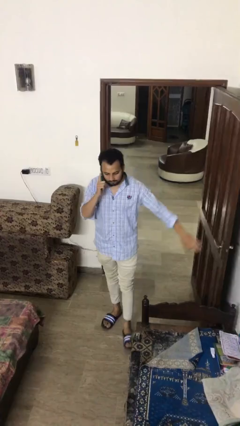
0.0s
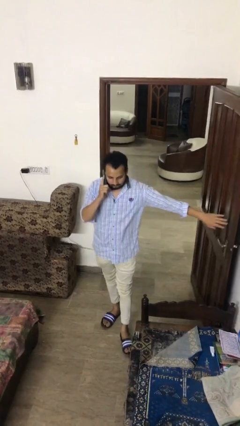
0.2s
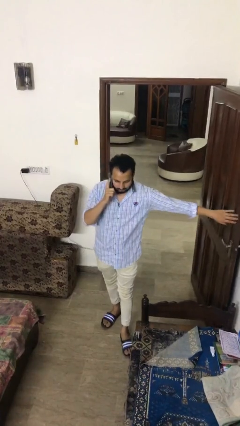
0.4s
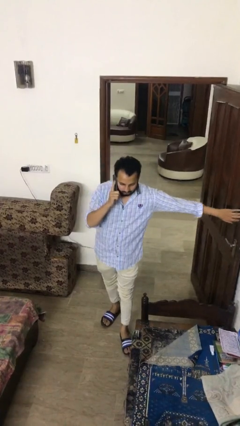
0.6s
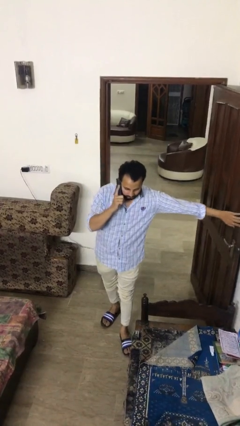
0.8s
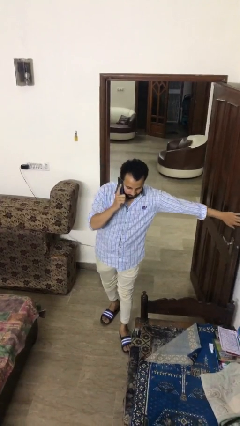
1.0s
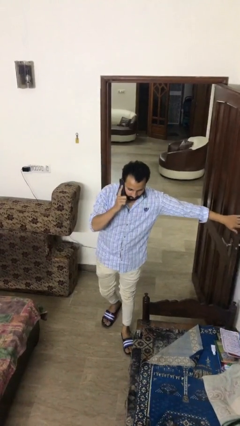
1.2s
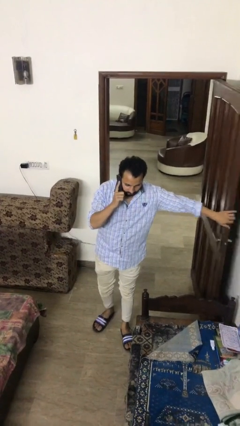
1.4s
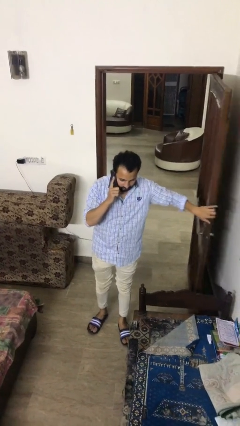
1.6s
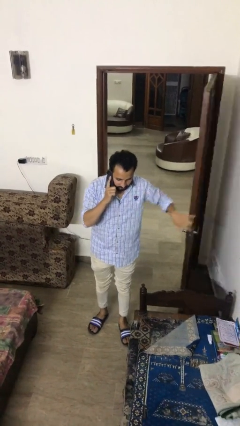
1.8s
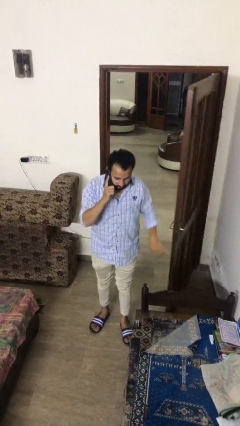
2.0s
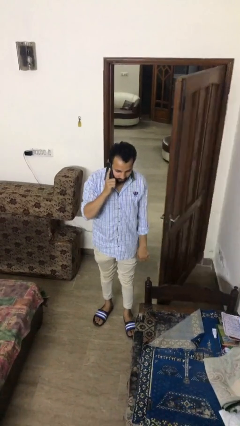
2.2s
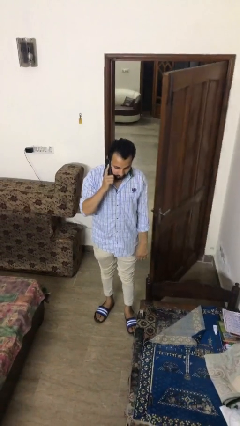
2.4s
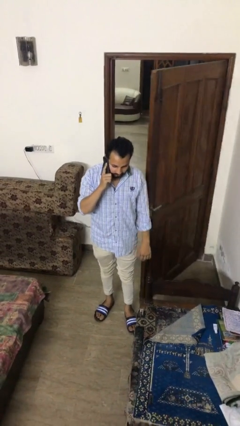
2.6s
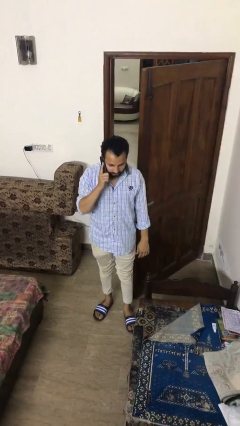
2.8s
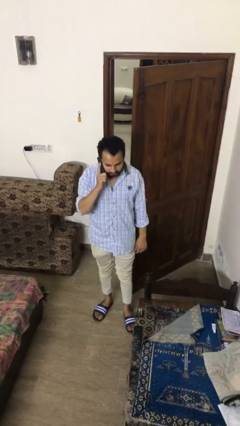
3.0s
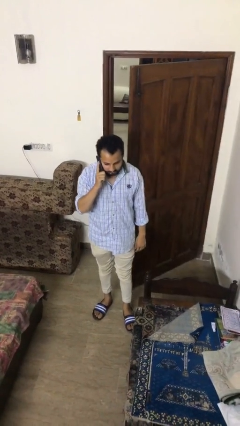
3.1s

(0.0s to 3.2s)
person closes facility door

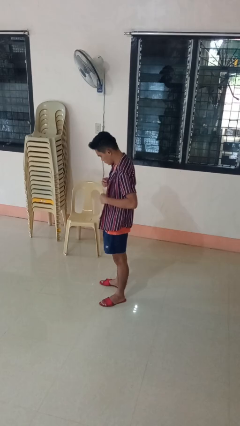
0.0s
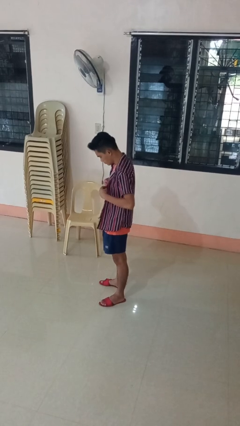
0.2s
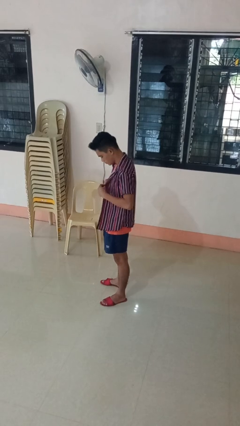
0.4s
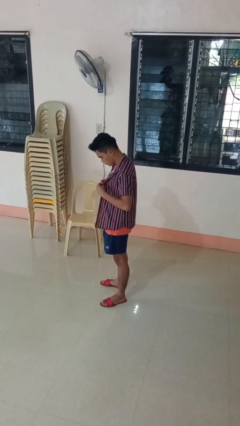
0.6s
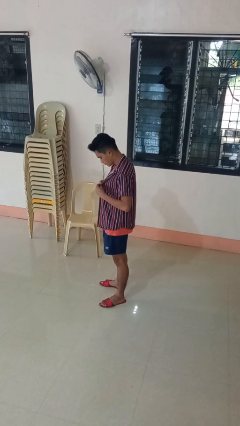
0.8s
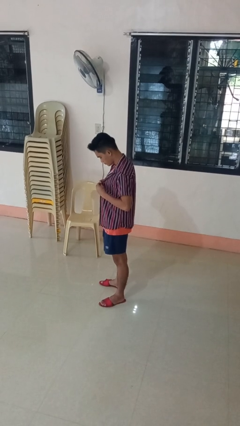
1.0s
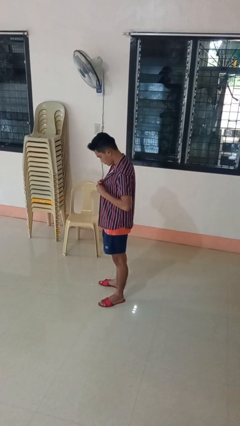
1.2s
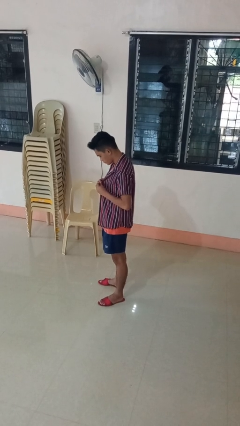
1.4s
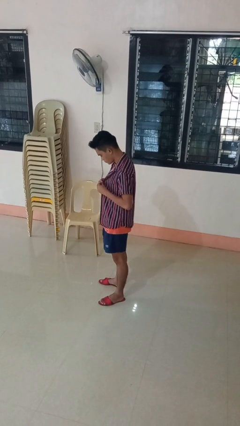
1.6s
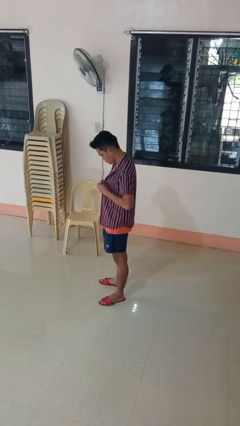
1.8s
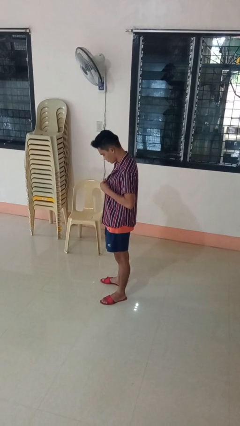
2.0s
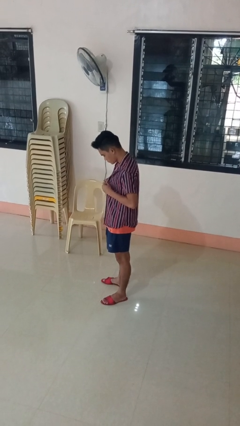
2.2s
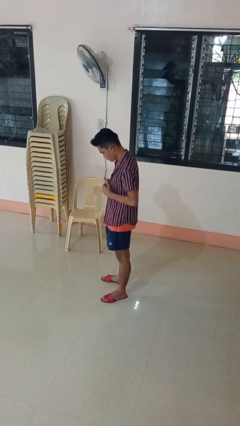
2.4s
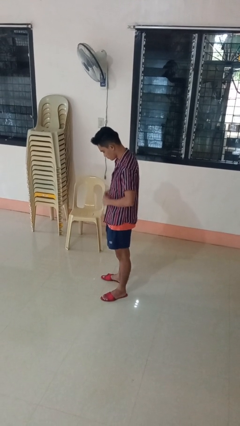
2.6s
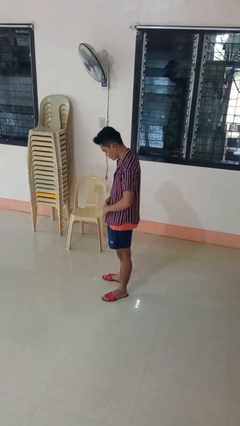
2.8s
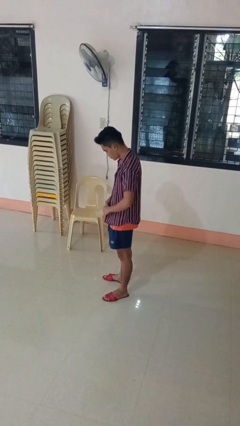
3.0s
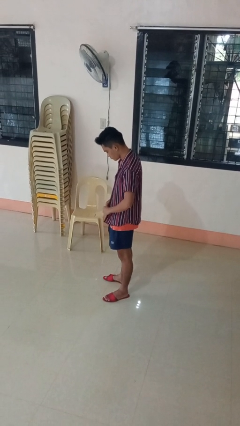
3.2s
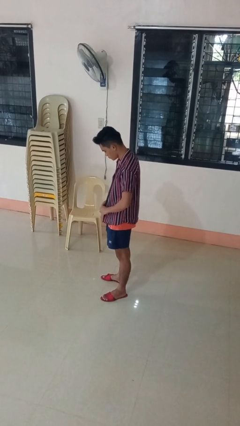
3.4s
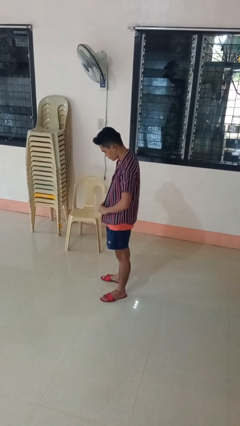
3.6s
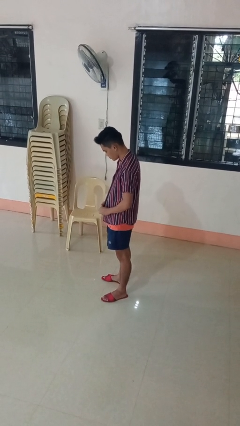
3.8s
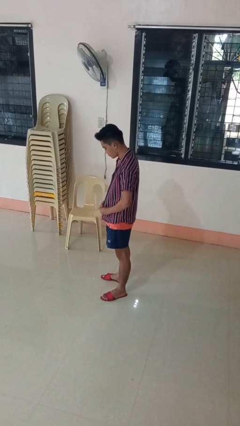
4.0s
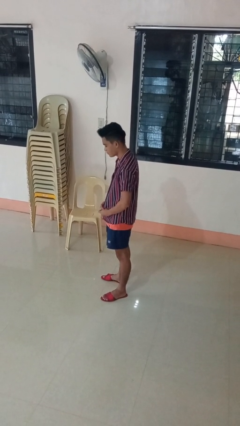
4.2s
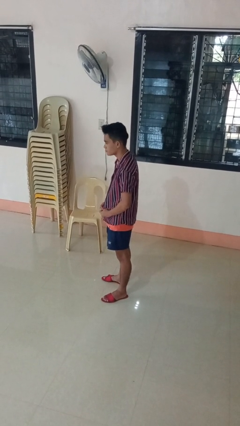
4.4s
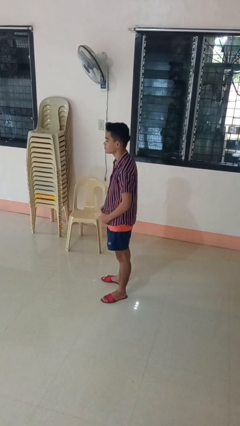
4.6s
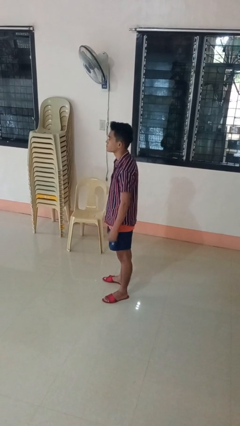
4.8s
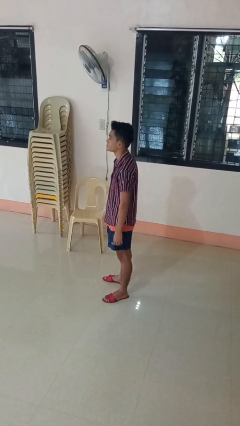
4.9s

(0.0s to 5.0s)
person buttons shirt

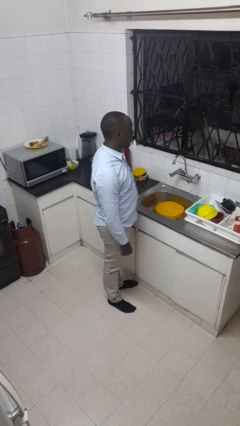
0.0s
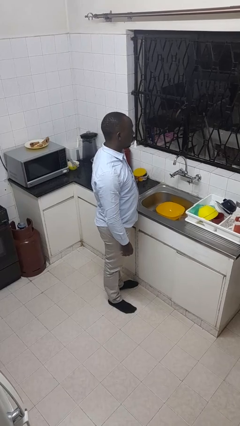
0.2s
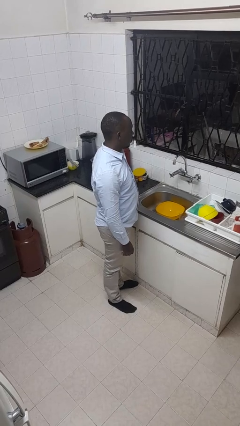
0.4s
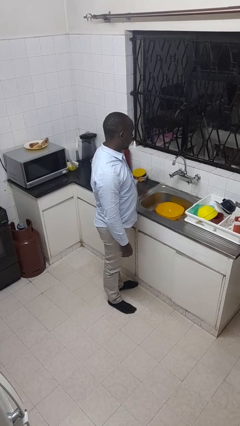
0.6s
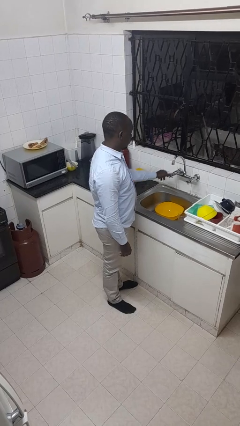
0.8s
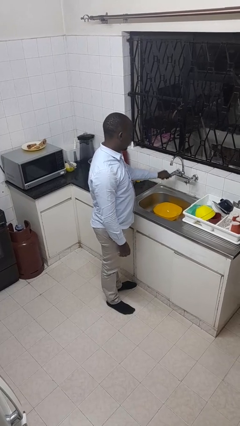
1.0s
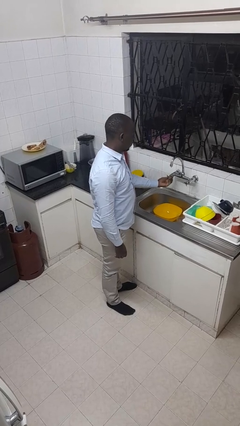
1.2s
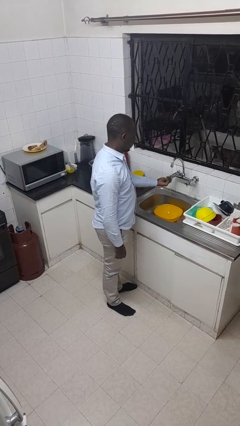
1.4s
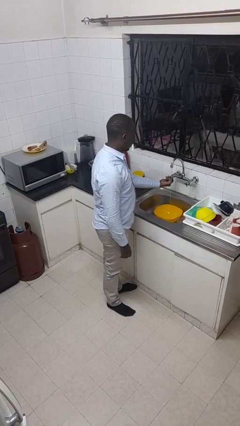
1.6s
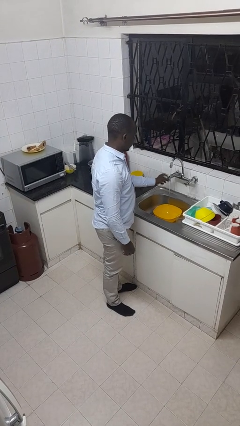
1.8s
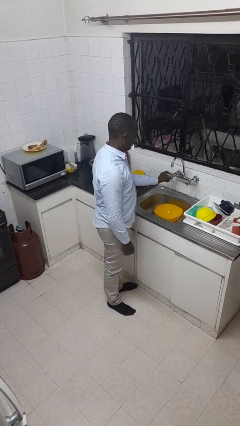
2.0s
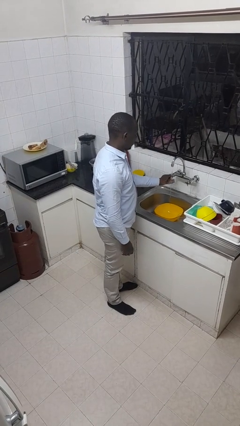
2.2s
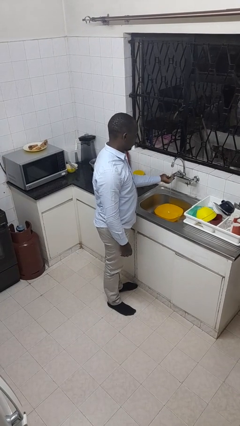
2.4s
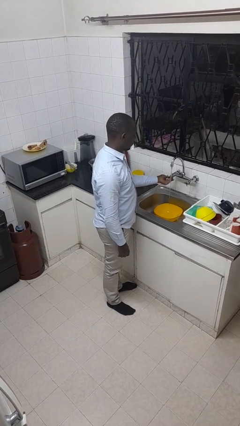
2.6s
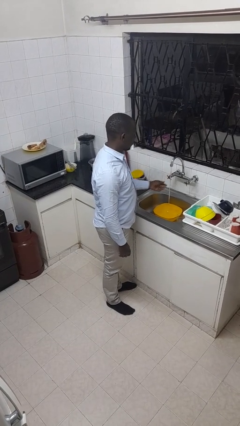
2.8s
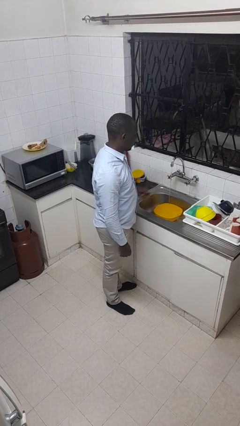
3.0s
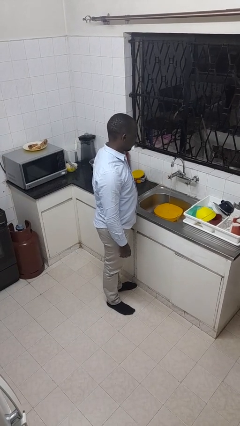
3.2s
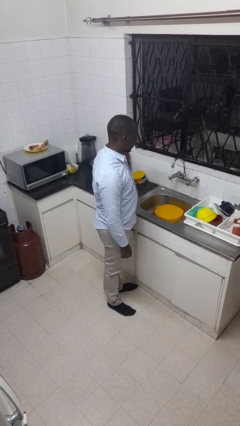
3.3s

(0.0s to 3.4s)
person turns on faucet

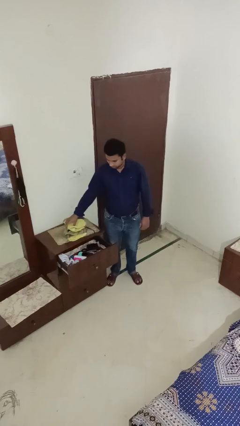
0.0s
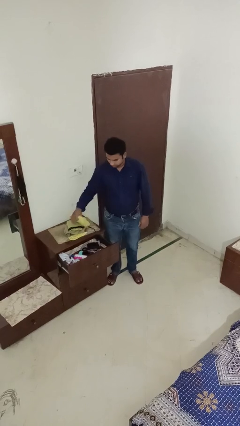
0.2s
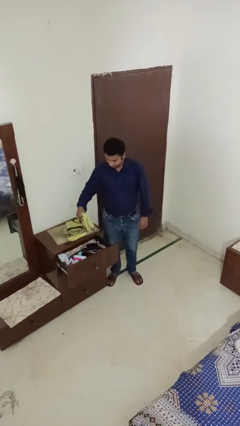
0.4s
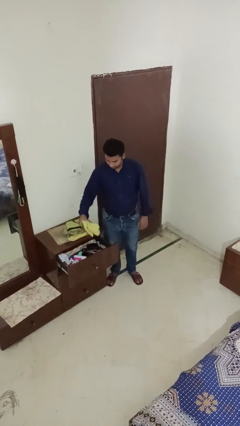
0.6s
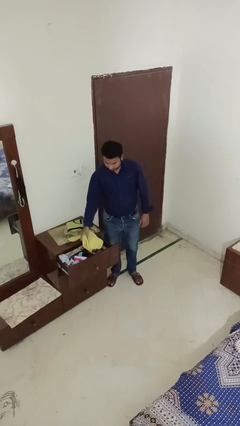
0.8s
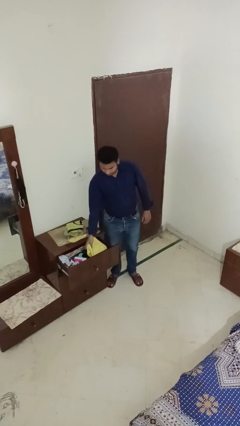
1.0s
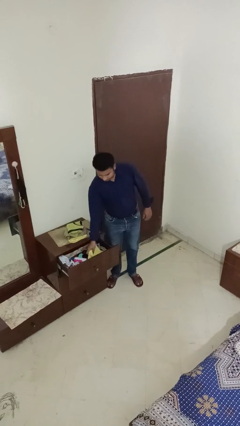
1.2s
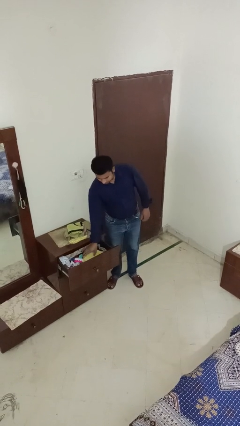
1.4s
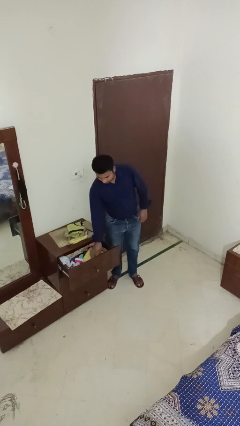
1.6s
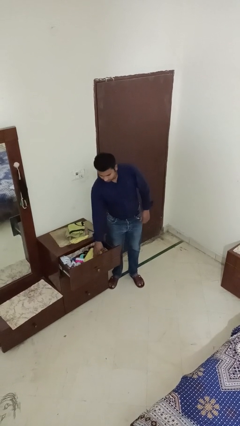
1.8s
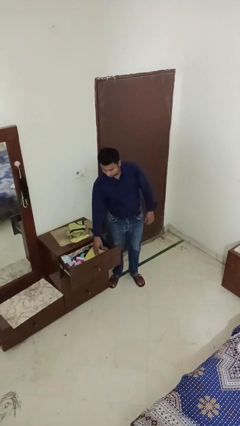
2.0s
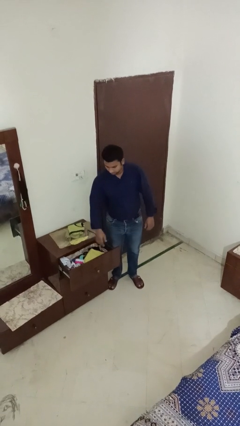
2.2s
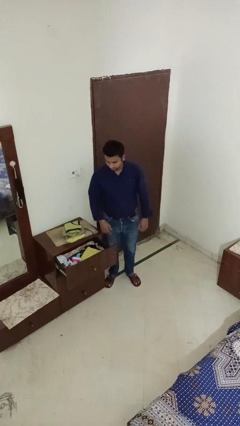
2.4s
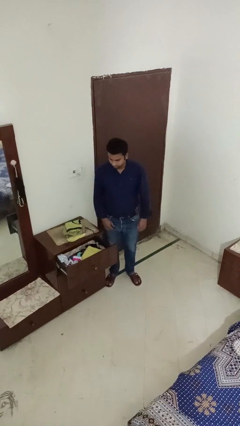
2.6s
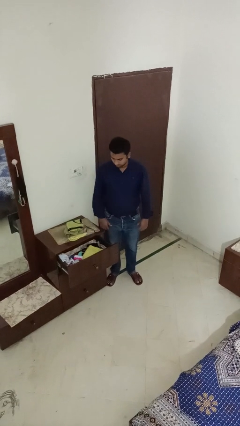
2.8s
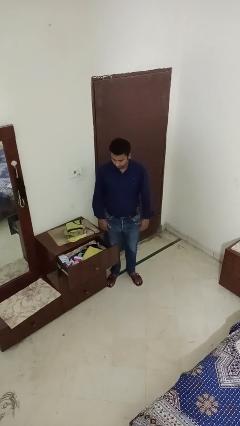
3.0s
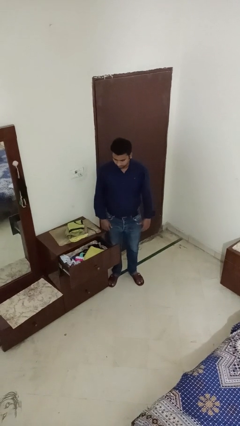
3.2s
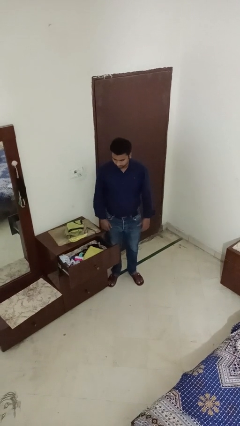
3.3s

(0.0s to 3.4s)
person puts clothes into dresser

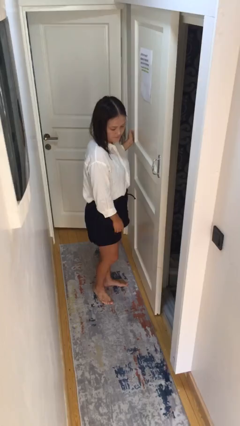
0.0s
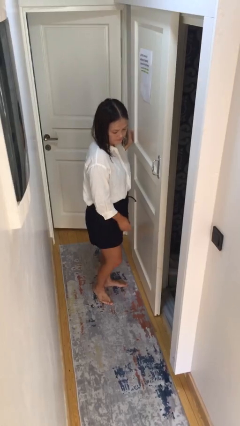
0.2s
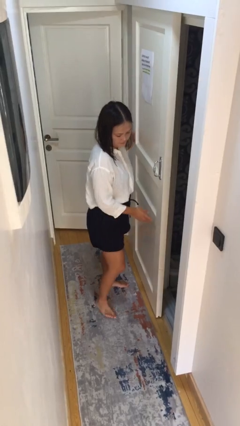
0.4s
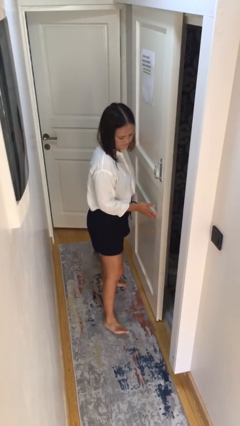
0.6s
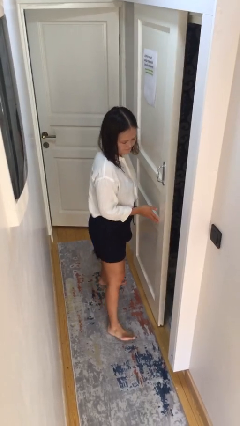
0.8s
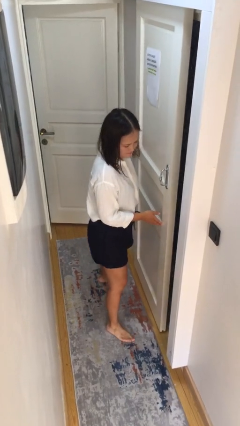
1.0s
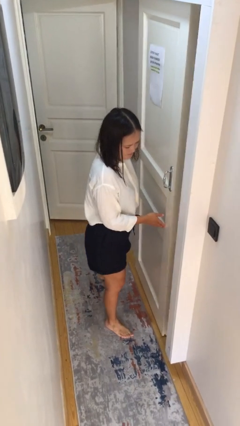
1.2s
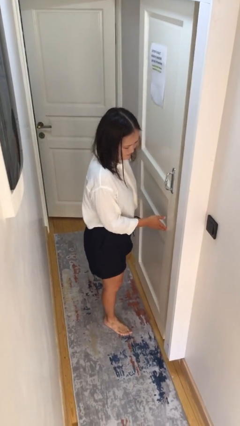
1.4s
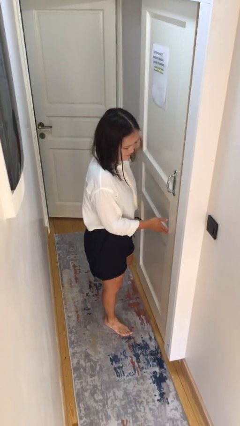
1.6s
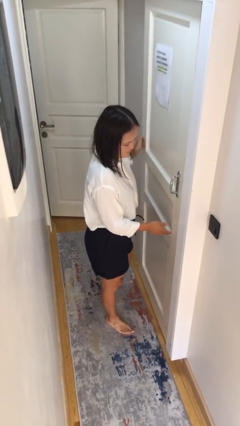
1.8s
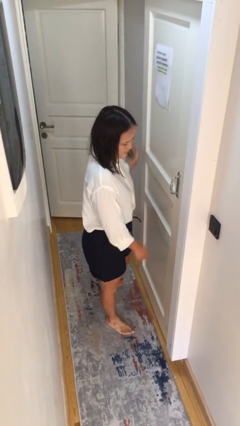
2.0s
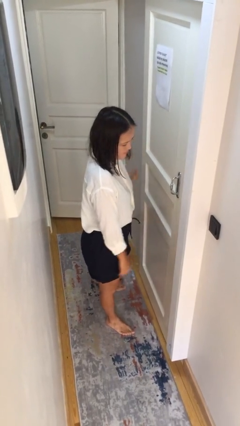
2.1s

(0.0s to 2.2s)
person closes sliding door

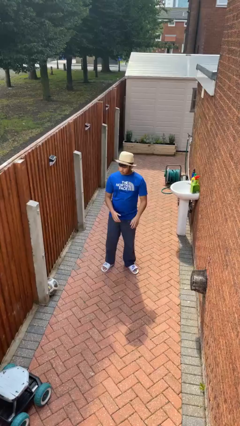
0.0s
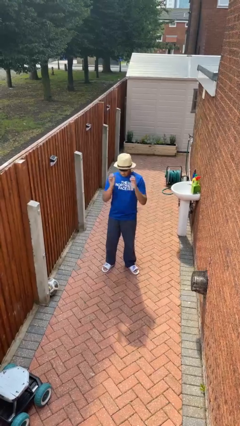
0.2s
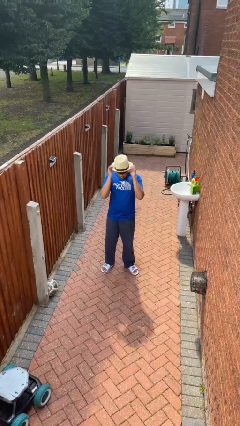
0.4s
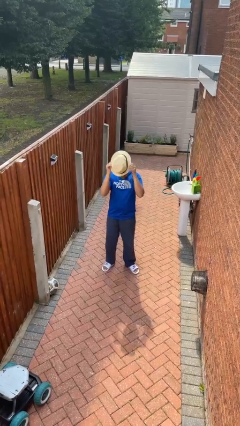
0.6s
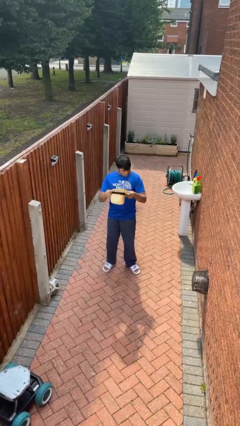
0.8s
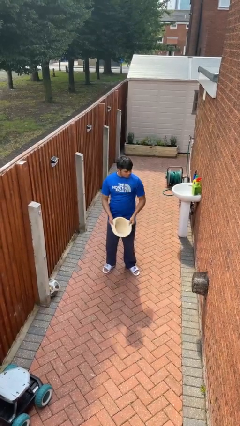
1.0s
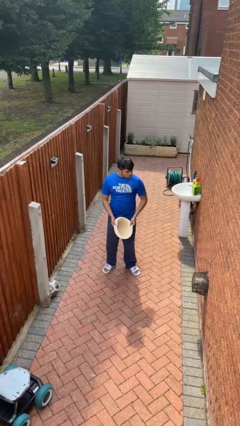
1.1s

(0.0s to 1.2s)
person takes off hat
